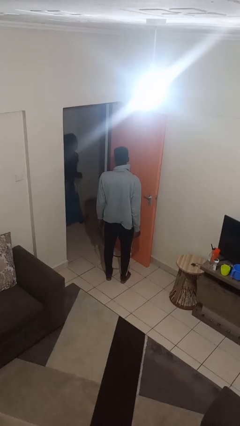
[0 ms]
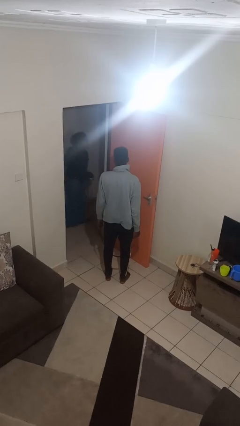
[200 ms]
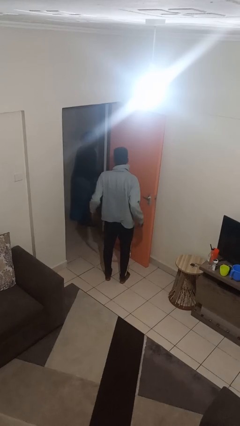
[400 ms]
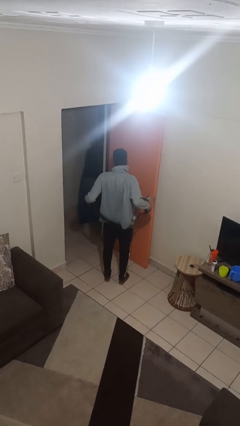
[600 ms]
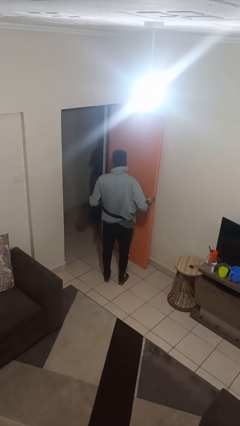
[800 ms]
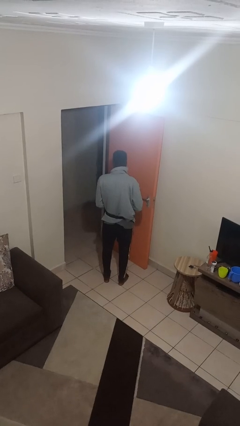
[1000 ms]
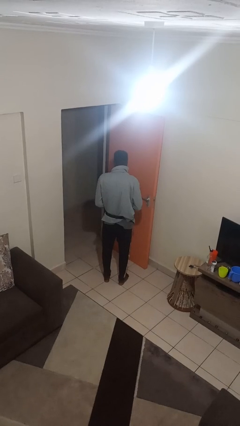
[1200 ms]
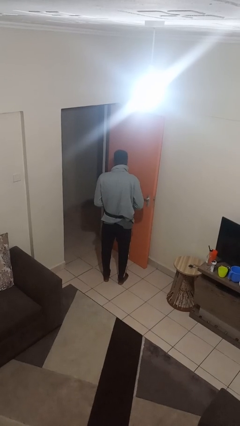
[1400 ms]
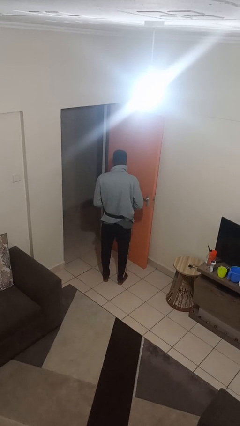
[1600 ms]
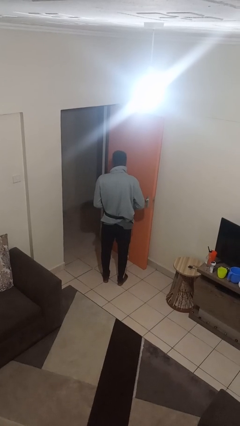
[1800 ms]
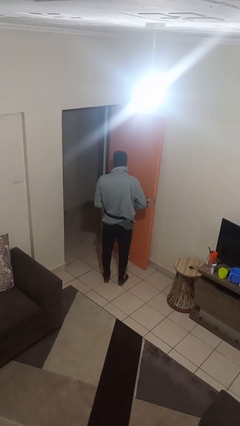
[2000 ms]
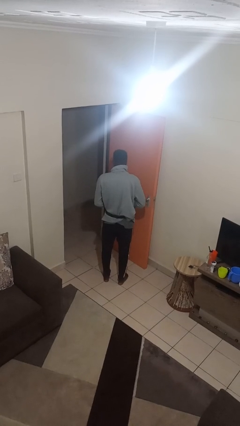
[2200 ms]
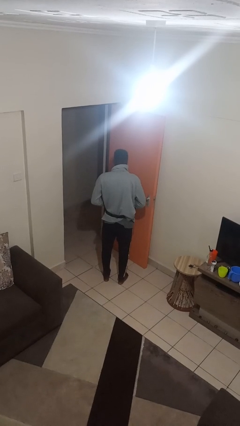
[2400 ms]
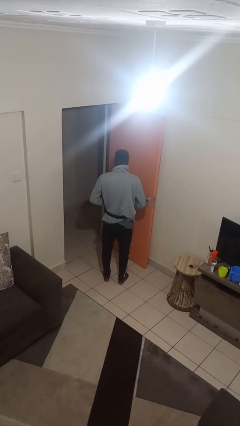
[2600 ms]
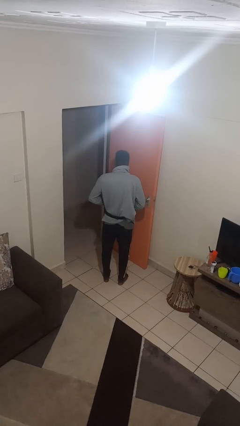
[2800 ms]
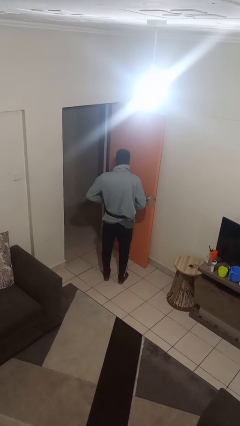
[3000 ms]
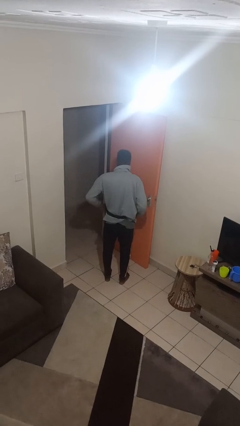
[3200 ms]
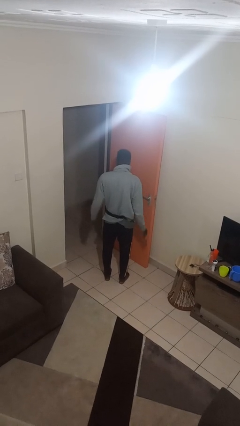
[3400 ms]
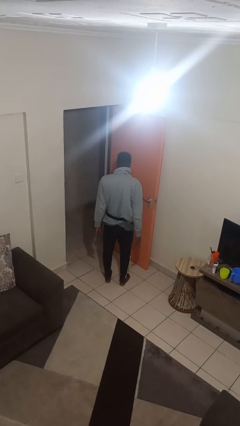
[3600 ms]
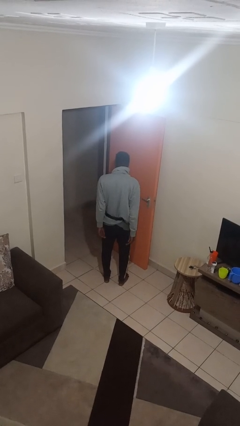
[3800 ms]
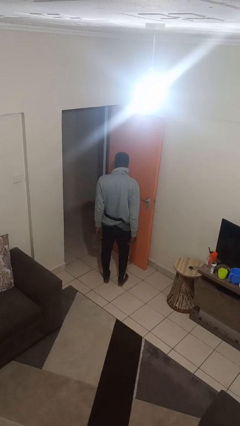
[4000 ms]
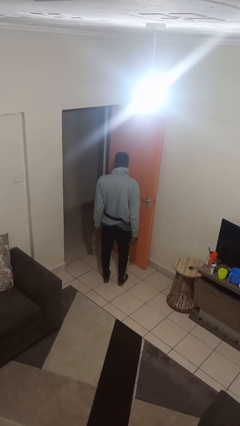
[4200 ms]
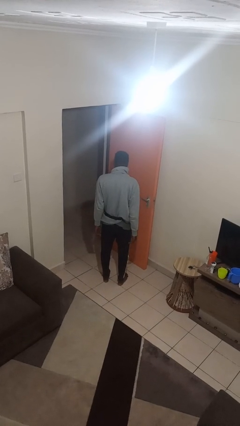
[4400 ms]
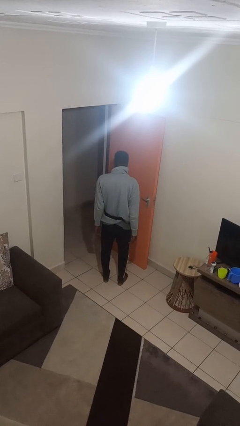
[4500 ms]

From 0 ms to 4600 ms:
person puts on belt

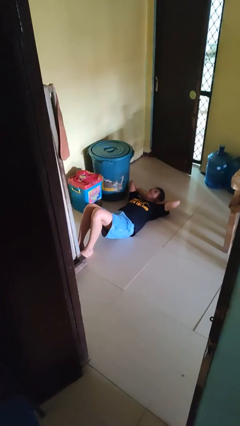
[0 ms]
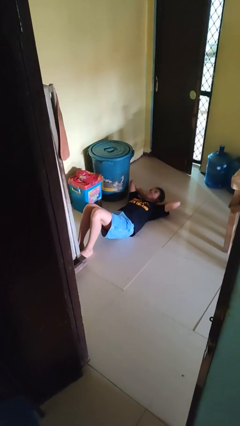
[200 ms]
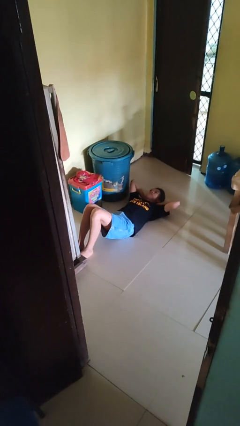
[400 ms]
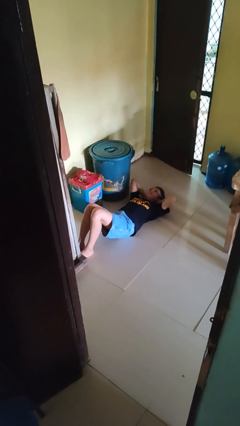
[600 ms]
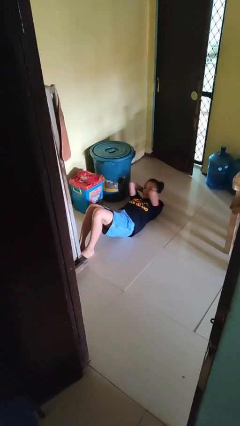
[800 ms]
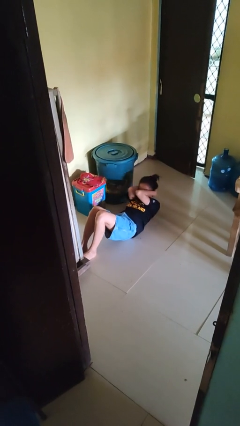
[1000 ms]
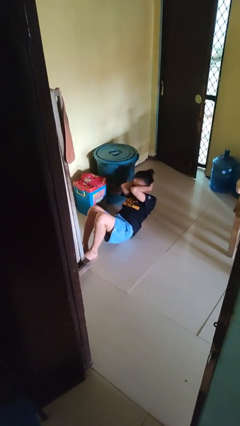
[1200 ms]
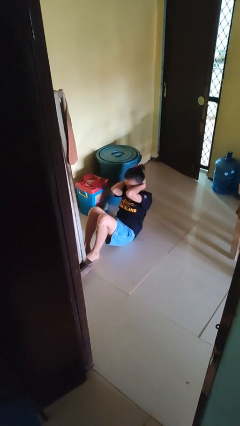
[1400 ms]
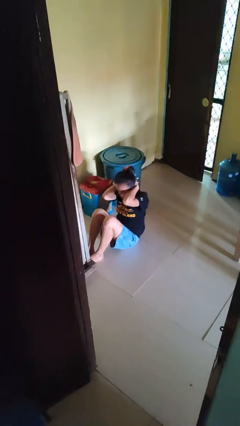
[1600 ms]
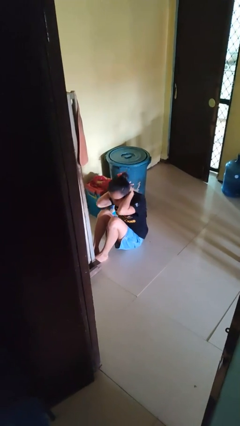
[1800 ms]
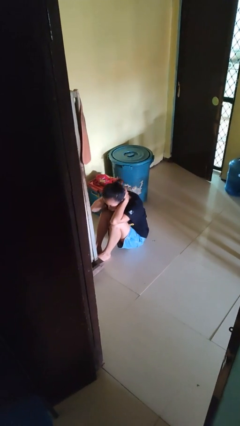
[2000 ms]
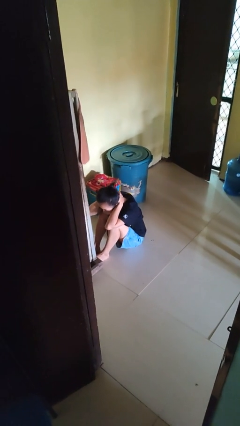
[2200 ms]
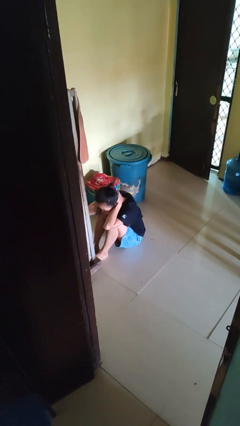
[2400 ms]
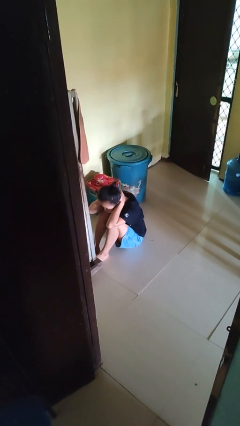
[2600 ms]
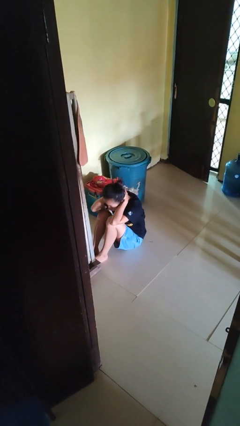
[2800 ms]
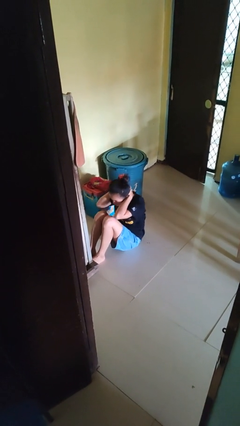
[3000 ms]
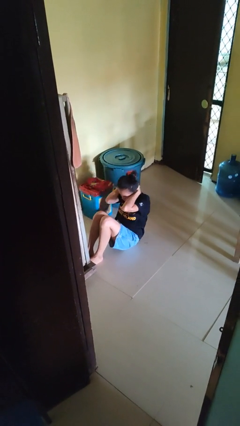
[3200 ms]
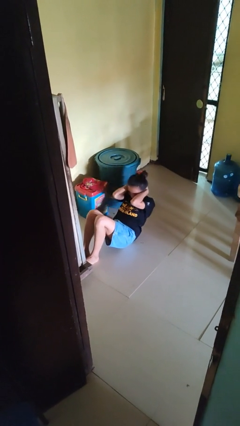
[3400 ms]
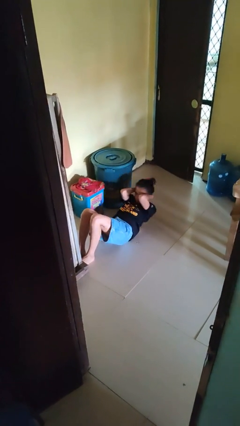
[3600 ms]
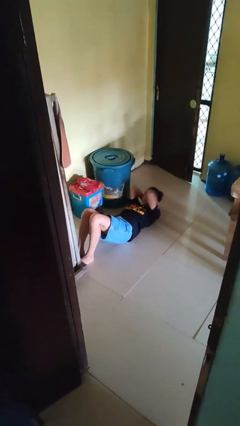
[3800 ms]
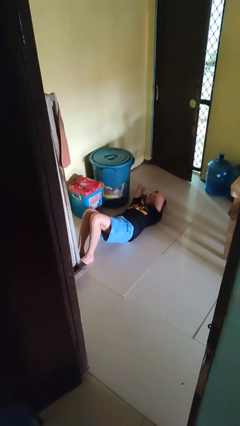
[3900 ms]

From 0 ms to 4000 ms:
person exercises with situp

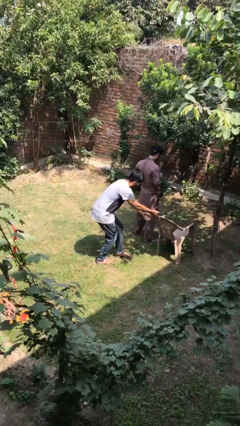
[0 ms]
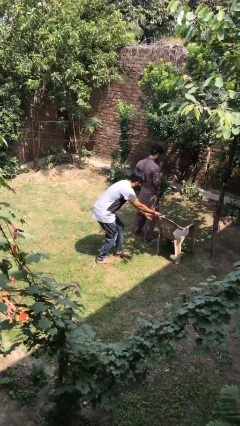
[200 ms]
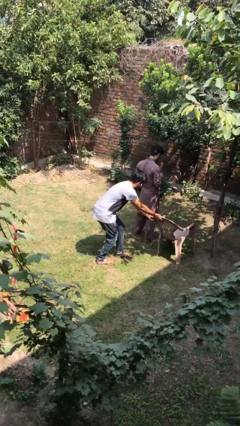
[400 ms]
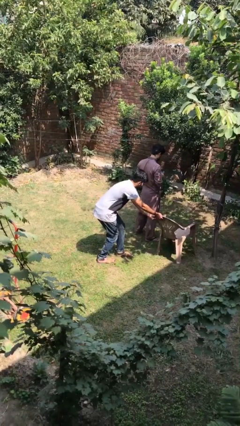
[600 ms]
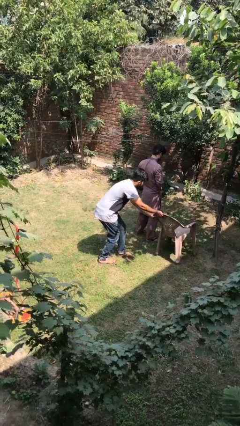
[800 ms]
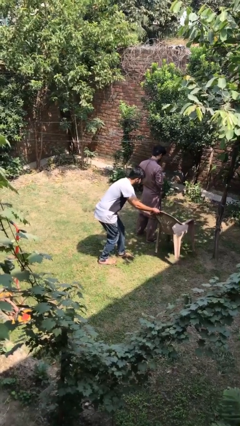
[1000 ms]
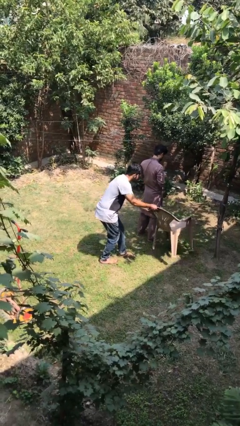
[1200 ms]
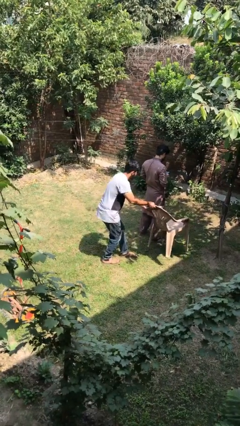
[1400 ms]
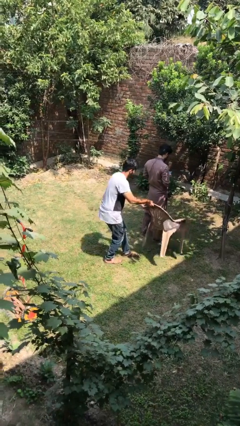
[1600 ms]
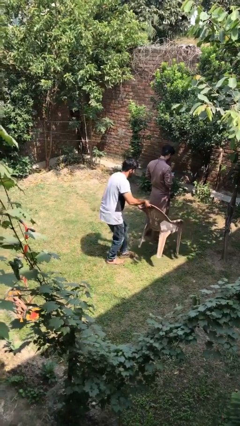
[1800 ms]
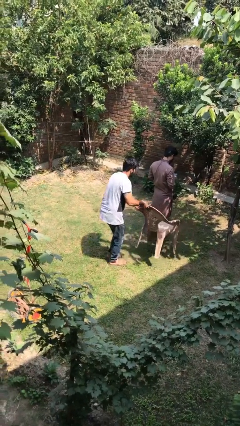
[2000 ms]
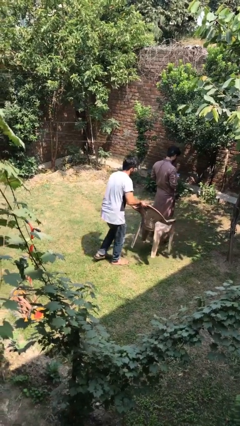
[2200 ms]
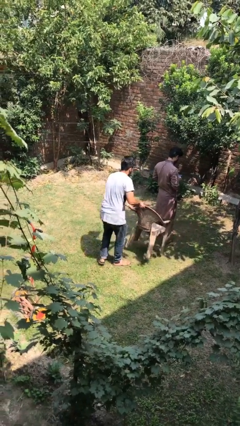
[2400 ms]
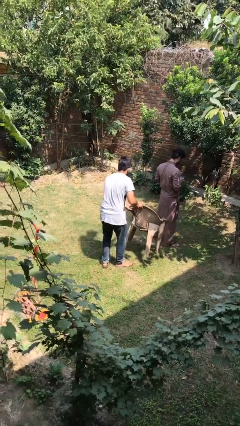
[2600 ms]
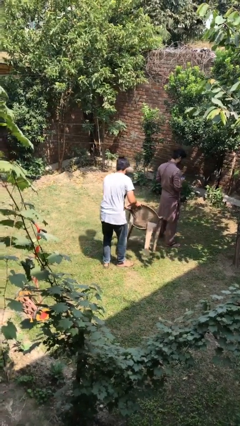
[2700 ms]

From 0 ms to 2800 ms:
person steals object from person

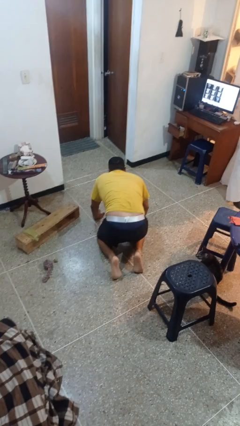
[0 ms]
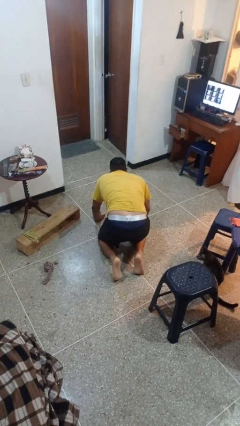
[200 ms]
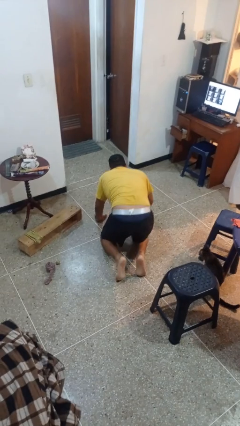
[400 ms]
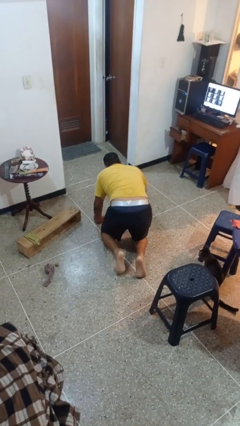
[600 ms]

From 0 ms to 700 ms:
person crawls

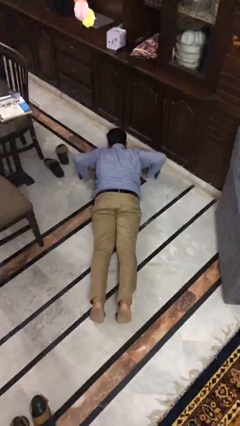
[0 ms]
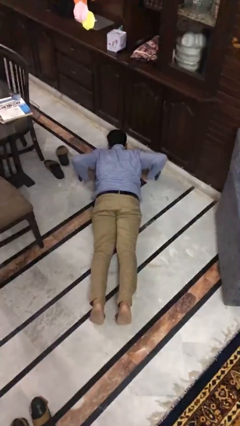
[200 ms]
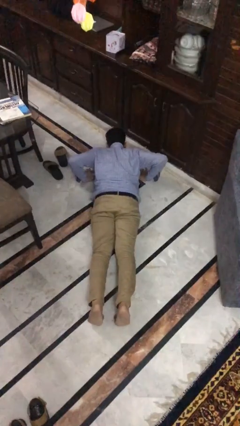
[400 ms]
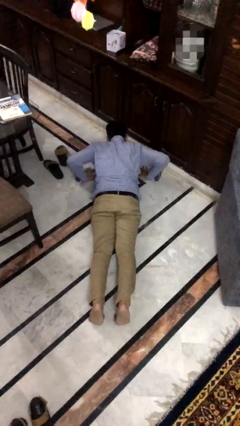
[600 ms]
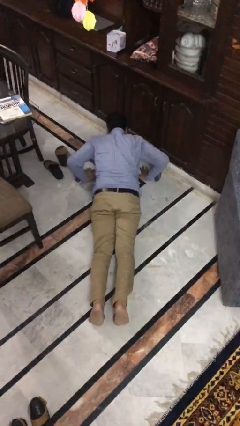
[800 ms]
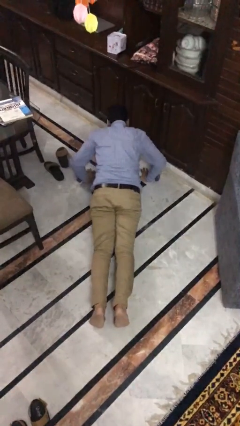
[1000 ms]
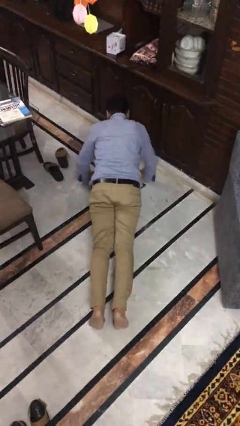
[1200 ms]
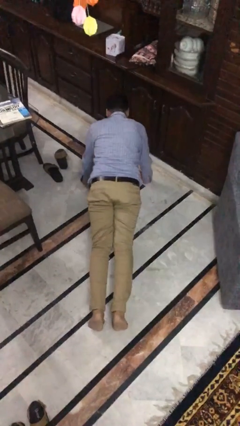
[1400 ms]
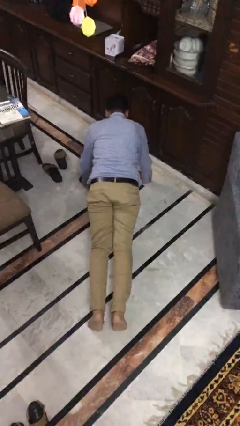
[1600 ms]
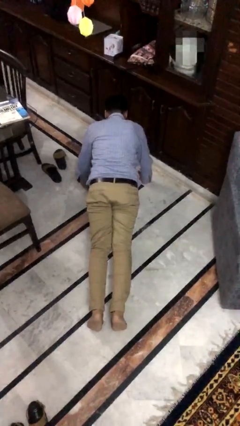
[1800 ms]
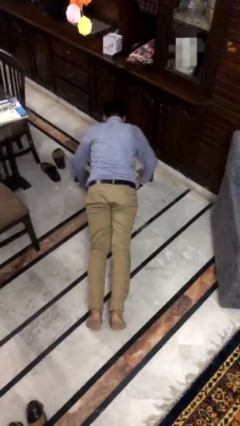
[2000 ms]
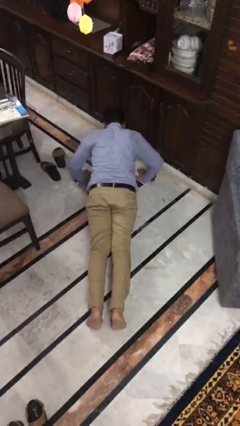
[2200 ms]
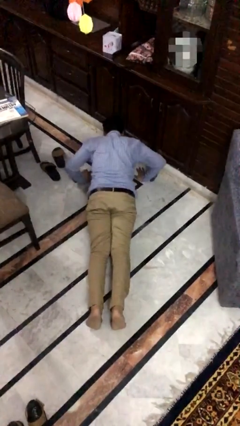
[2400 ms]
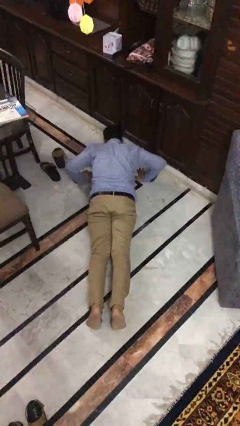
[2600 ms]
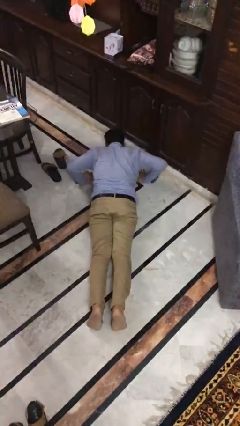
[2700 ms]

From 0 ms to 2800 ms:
person exercises with pushup

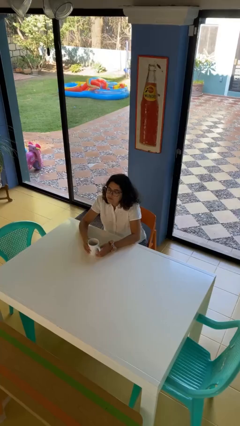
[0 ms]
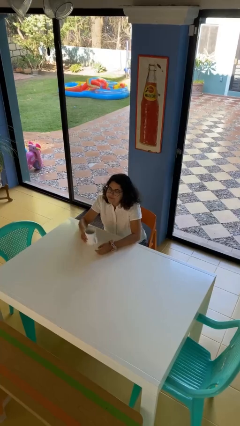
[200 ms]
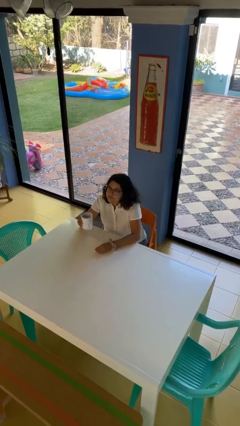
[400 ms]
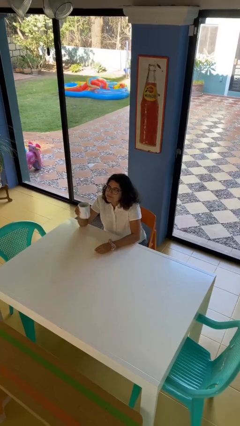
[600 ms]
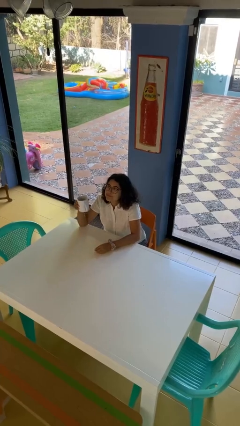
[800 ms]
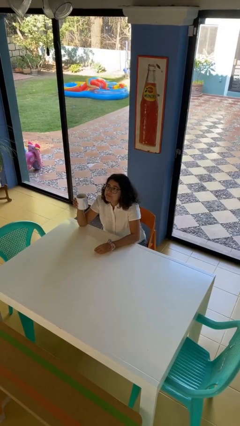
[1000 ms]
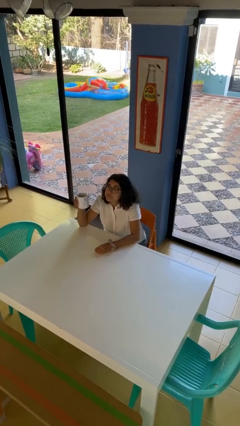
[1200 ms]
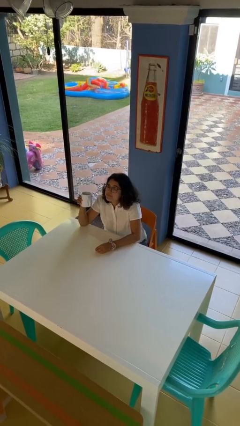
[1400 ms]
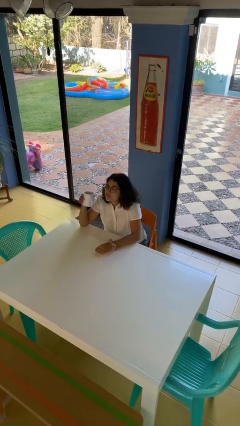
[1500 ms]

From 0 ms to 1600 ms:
person picks up object from table

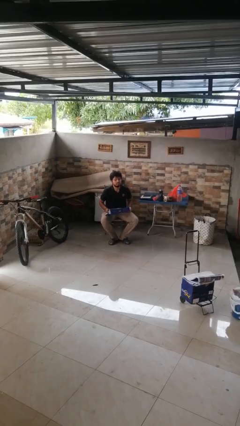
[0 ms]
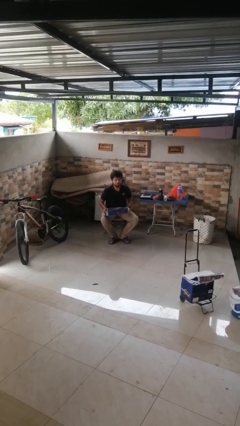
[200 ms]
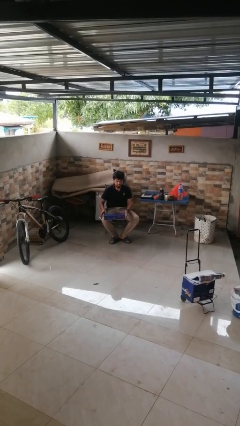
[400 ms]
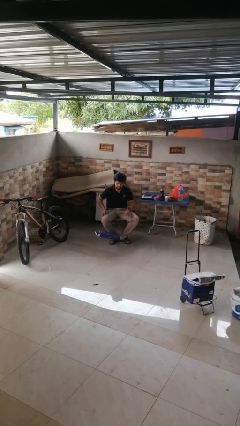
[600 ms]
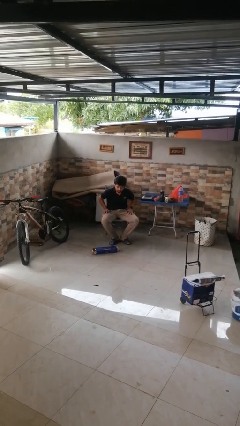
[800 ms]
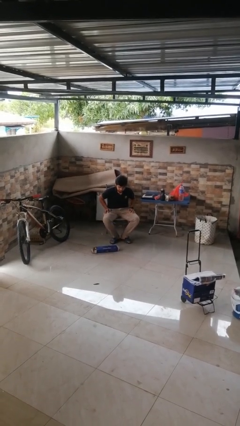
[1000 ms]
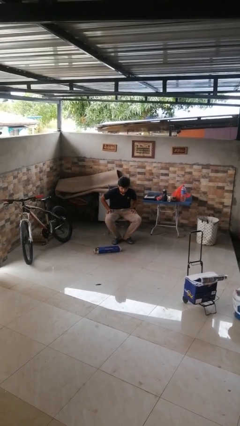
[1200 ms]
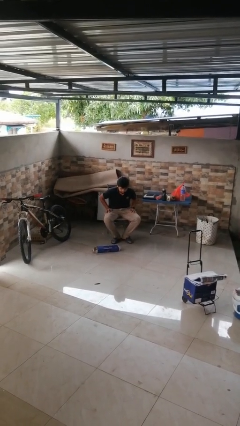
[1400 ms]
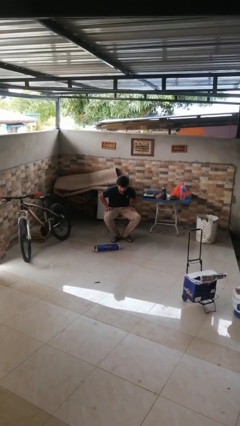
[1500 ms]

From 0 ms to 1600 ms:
person trips on object on floor
